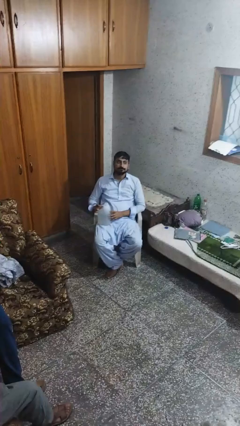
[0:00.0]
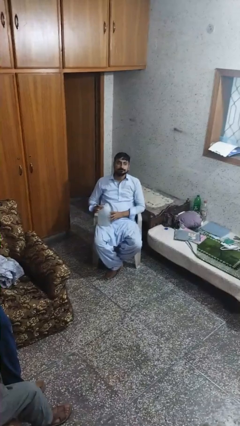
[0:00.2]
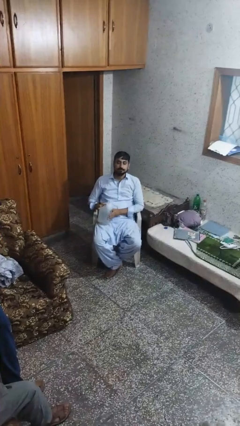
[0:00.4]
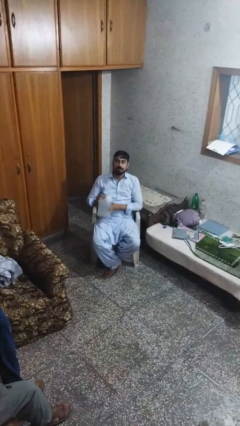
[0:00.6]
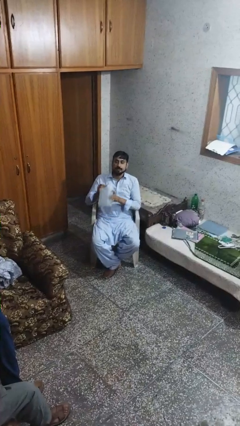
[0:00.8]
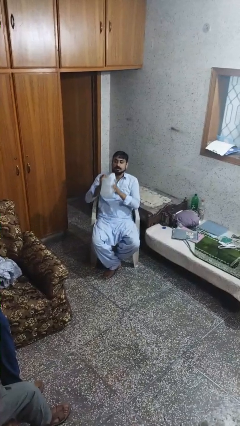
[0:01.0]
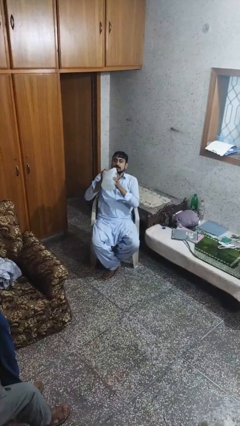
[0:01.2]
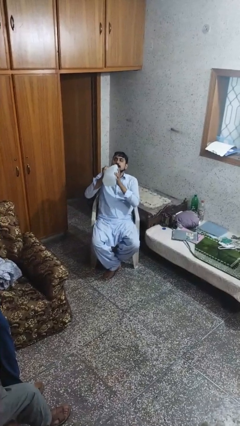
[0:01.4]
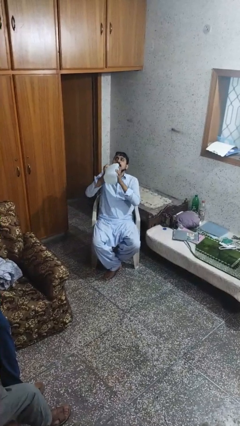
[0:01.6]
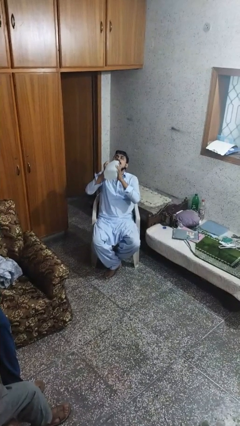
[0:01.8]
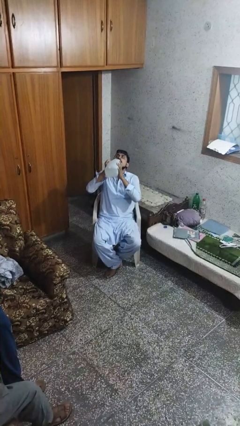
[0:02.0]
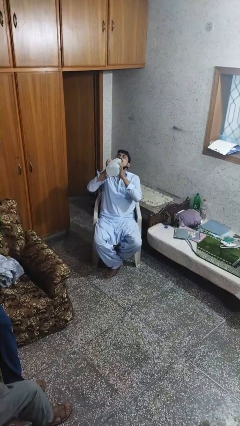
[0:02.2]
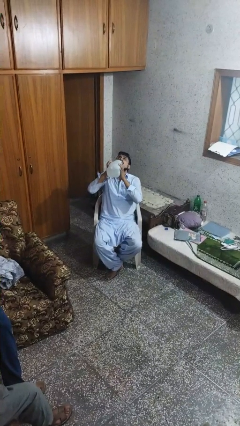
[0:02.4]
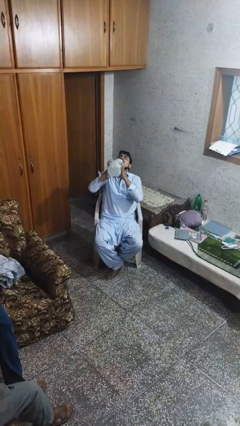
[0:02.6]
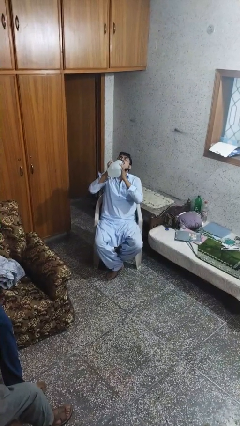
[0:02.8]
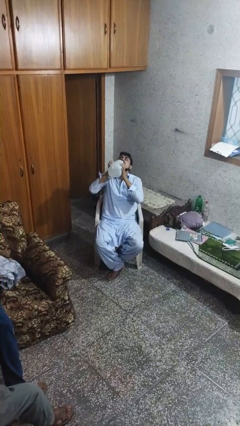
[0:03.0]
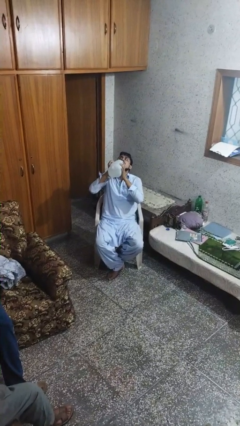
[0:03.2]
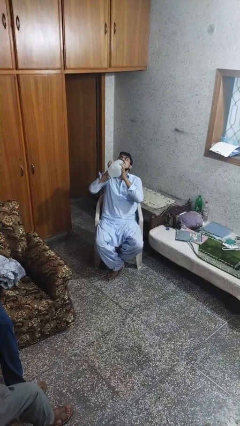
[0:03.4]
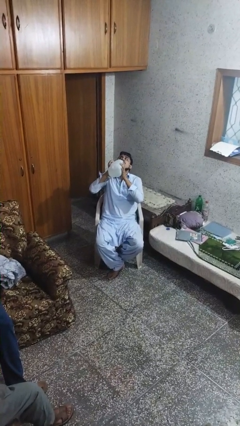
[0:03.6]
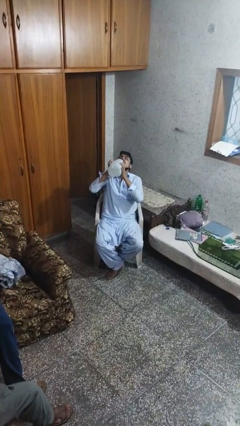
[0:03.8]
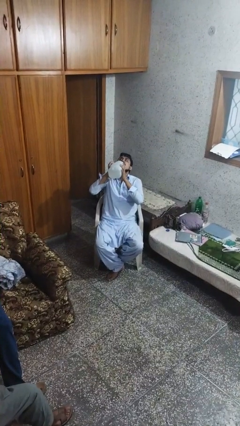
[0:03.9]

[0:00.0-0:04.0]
person drinks from bottle

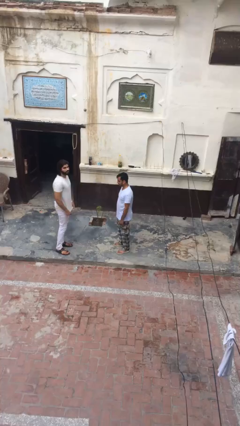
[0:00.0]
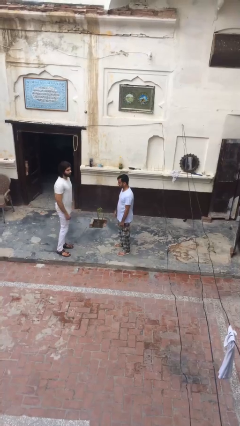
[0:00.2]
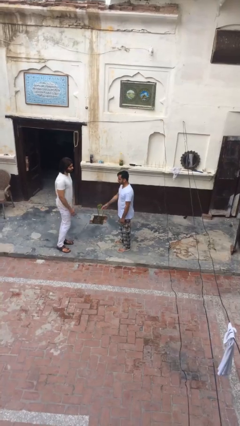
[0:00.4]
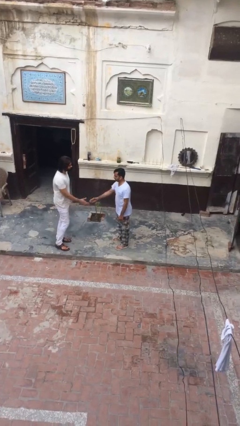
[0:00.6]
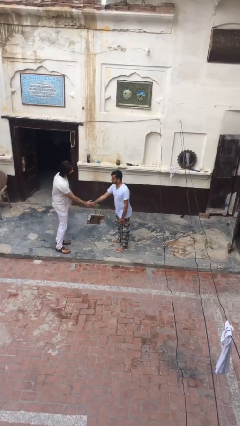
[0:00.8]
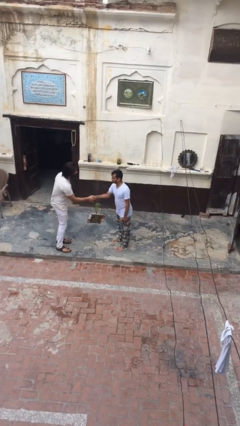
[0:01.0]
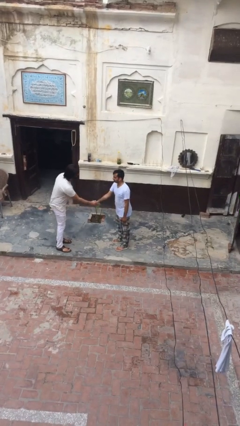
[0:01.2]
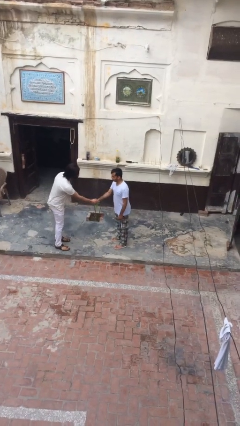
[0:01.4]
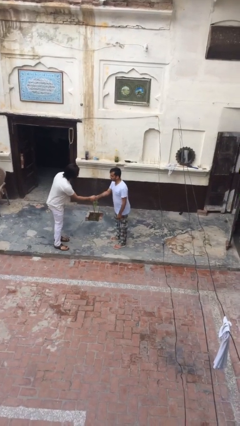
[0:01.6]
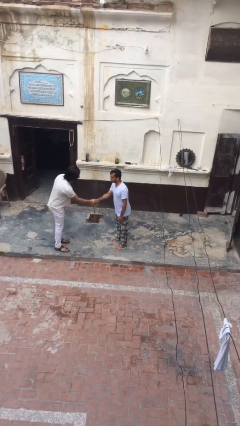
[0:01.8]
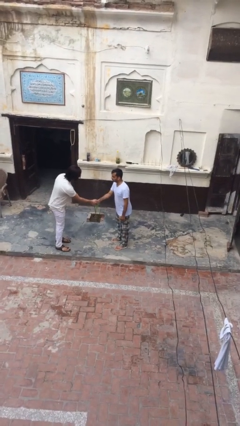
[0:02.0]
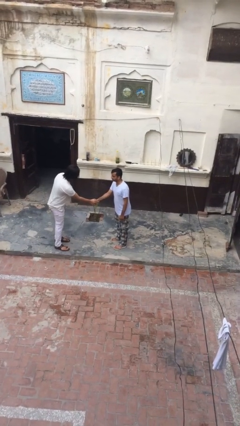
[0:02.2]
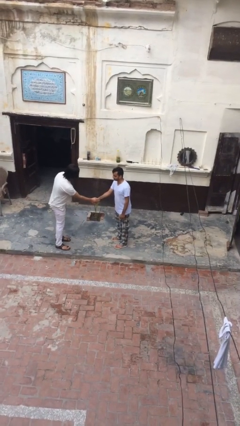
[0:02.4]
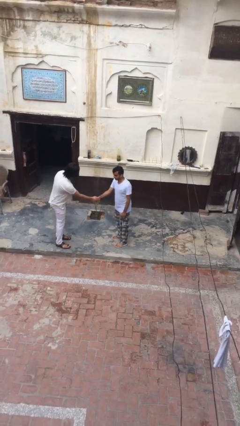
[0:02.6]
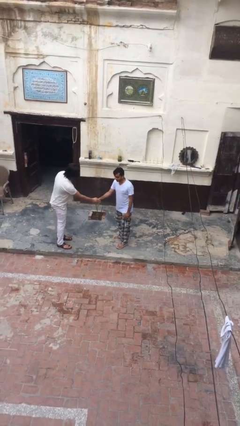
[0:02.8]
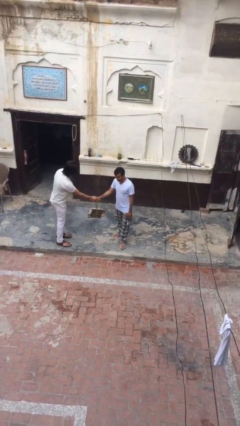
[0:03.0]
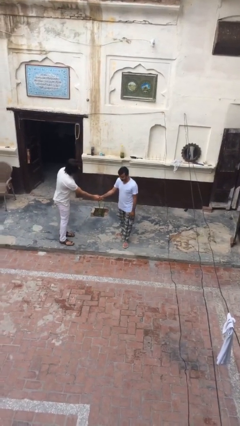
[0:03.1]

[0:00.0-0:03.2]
person shakes hand

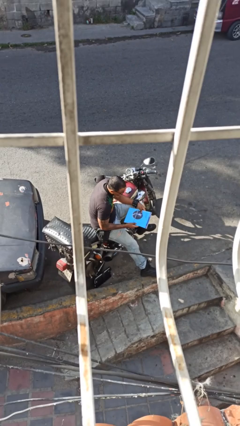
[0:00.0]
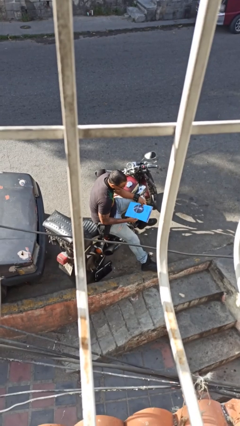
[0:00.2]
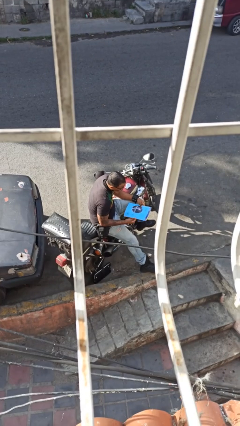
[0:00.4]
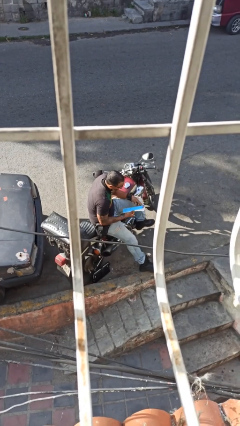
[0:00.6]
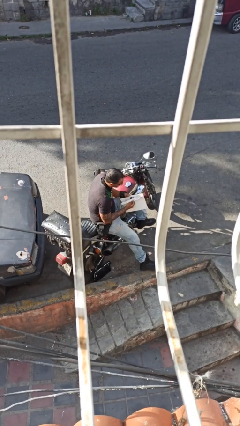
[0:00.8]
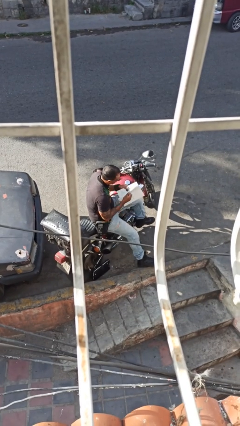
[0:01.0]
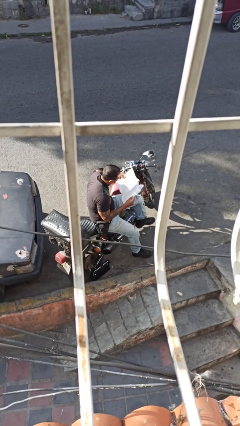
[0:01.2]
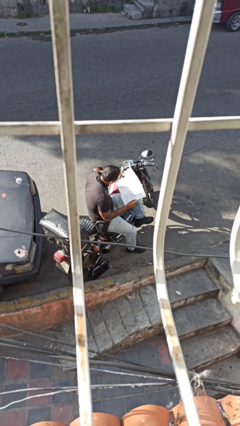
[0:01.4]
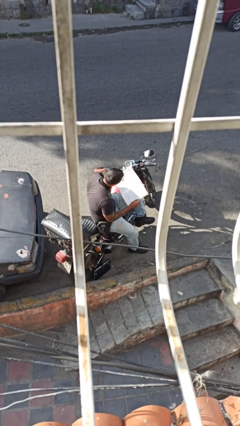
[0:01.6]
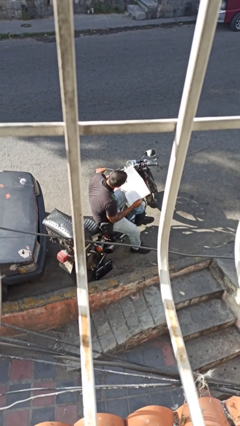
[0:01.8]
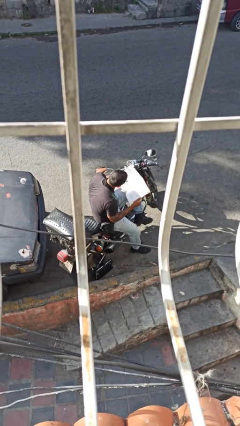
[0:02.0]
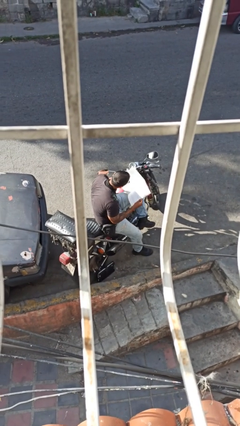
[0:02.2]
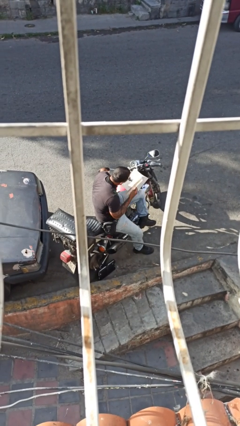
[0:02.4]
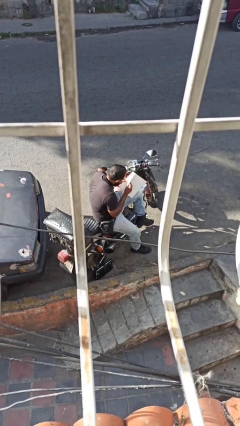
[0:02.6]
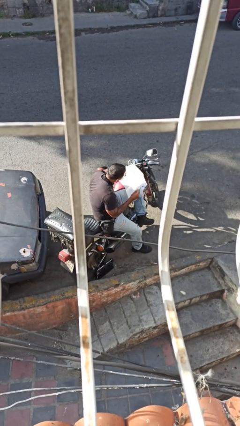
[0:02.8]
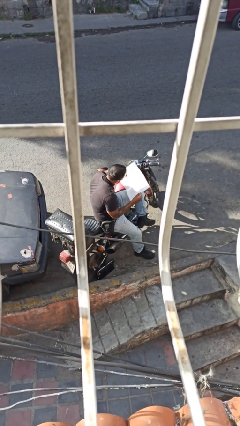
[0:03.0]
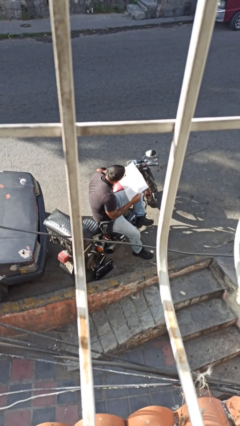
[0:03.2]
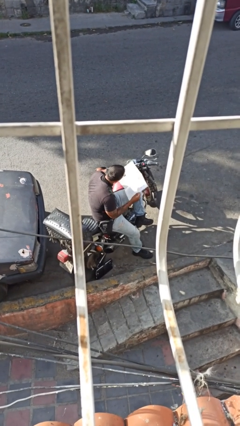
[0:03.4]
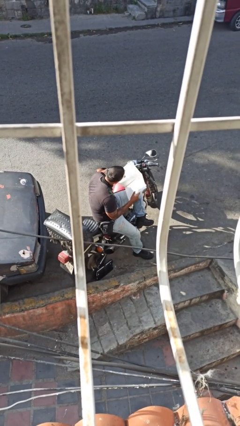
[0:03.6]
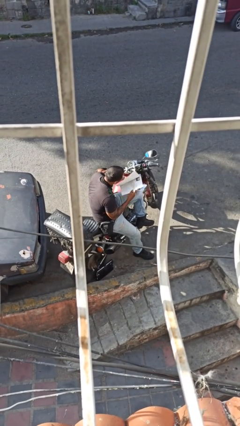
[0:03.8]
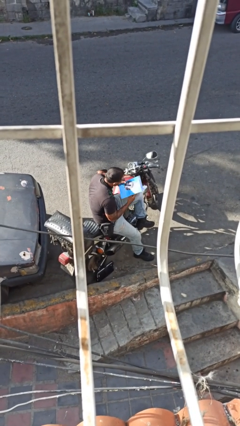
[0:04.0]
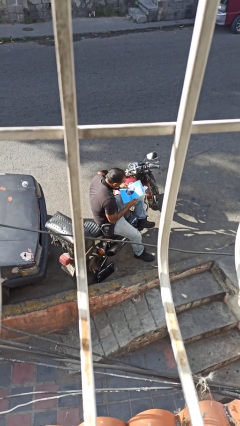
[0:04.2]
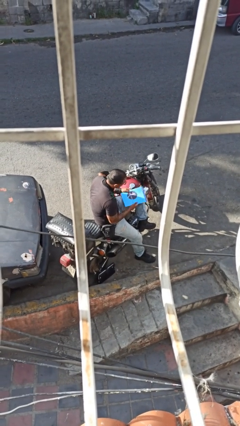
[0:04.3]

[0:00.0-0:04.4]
person reads document

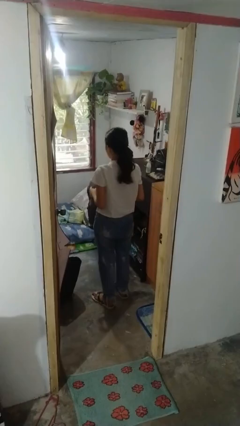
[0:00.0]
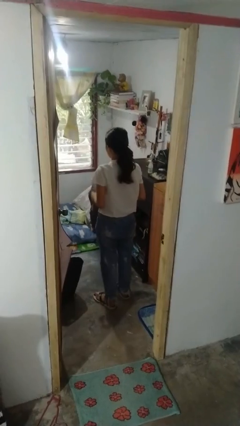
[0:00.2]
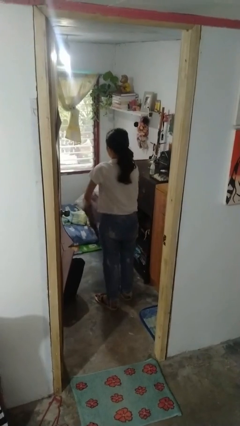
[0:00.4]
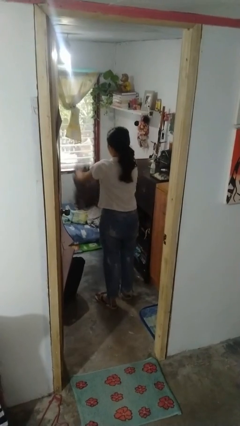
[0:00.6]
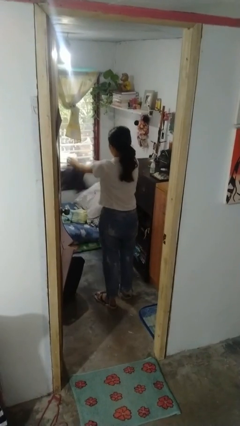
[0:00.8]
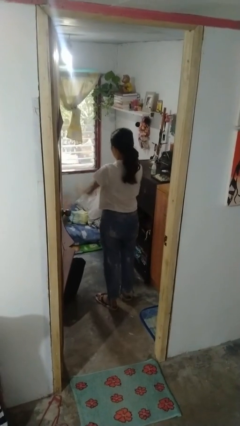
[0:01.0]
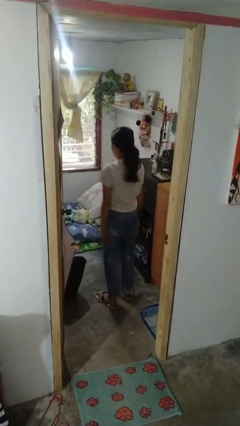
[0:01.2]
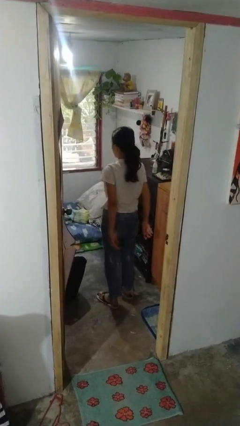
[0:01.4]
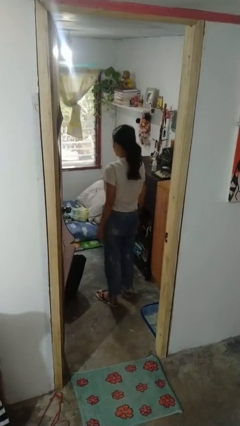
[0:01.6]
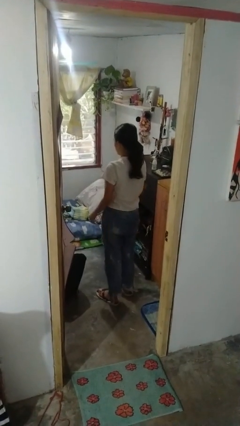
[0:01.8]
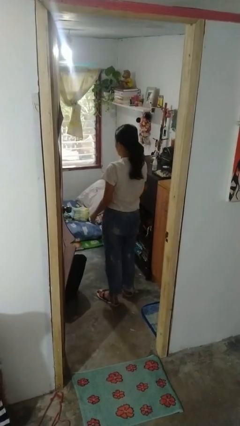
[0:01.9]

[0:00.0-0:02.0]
person throws object on bed

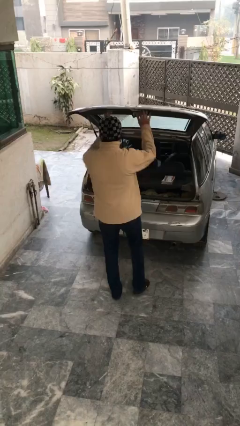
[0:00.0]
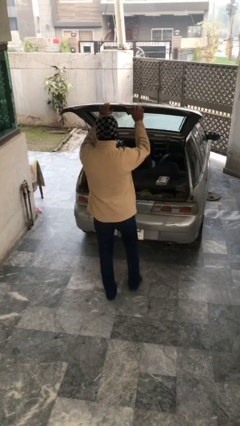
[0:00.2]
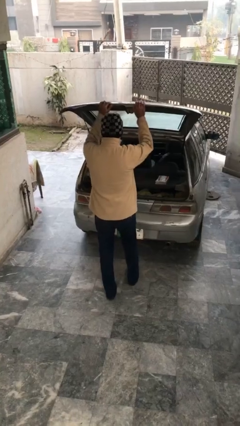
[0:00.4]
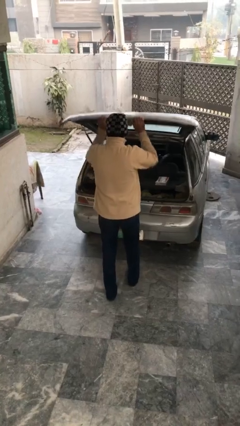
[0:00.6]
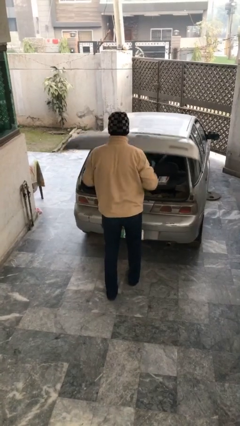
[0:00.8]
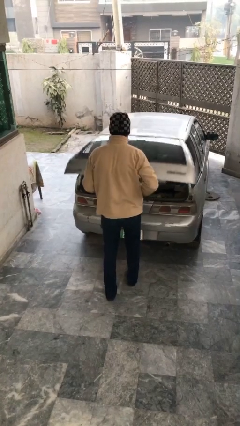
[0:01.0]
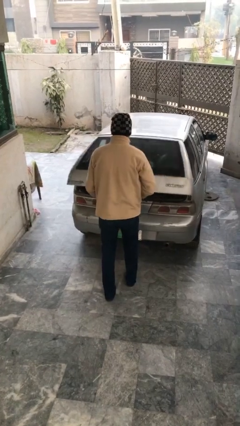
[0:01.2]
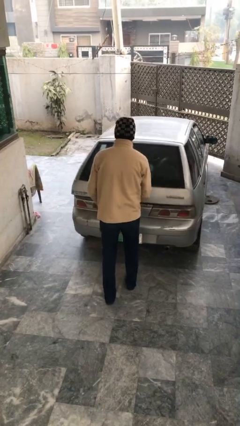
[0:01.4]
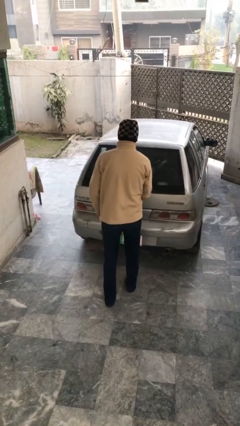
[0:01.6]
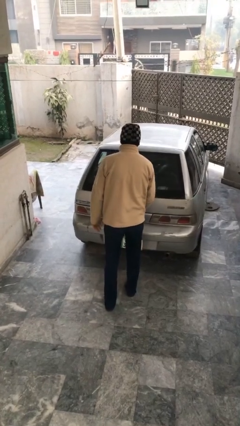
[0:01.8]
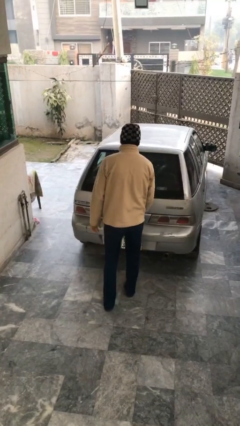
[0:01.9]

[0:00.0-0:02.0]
person closes car trunk

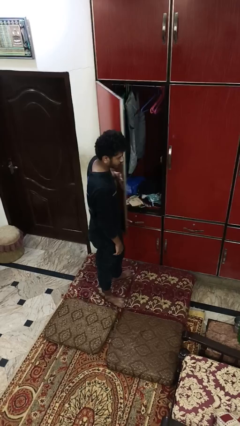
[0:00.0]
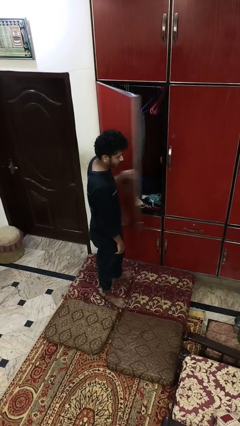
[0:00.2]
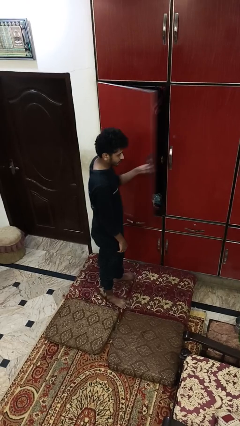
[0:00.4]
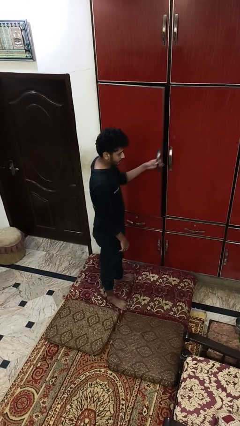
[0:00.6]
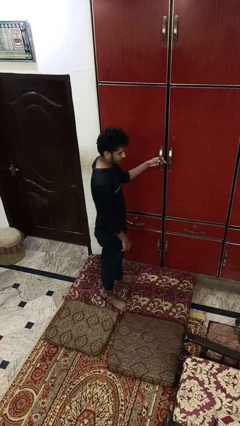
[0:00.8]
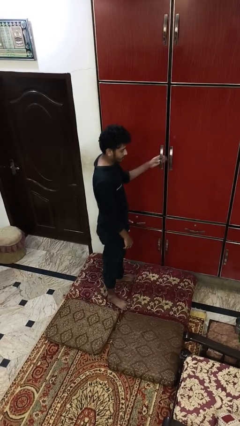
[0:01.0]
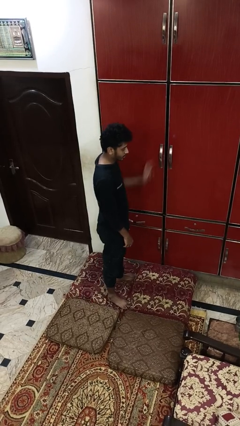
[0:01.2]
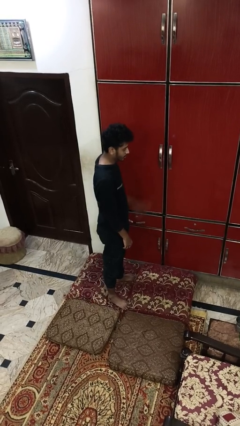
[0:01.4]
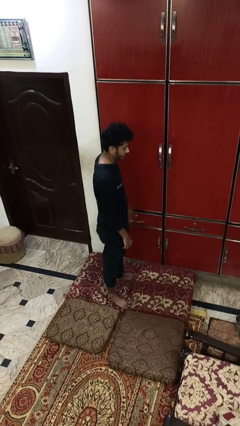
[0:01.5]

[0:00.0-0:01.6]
person closes closet door

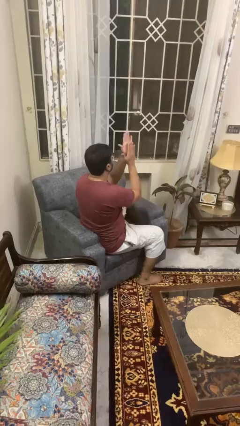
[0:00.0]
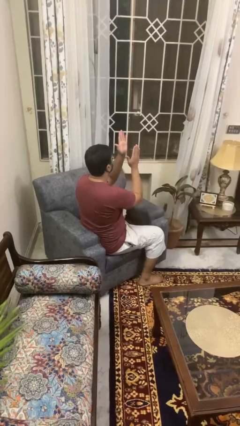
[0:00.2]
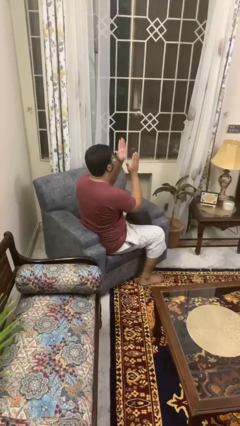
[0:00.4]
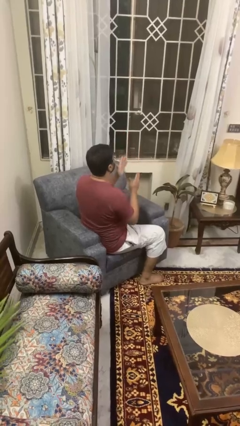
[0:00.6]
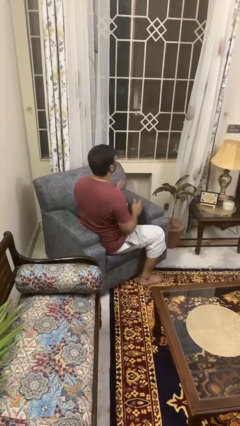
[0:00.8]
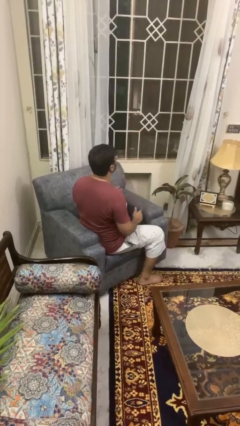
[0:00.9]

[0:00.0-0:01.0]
person swats bug
